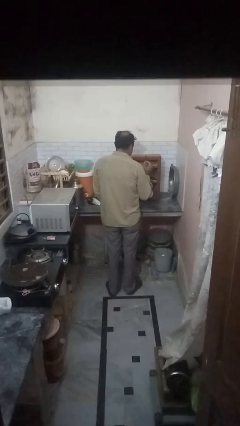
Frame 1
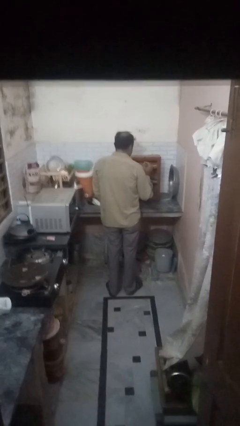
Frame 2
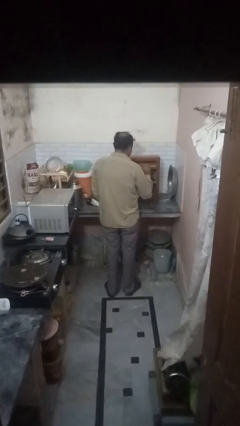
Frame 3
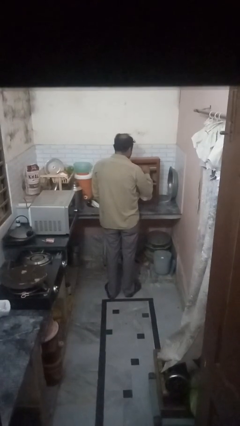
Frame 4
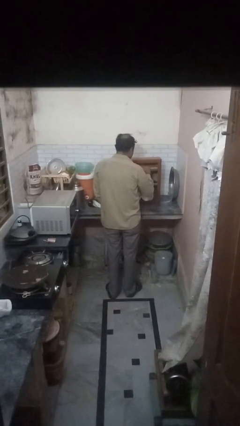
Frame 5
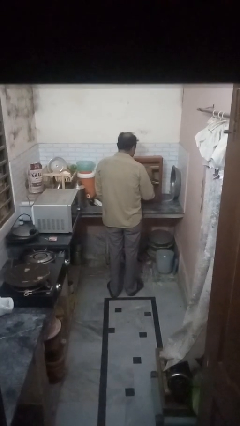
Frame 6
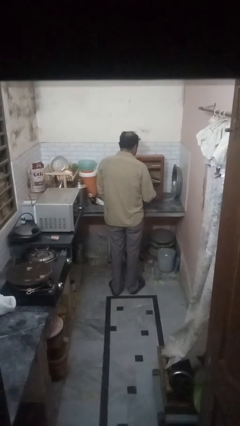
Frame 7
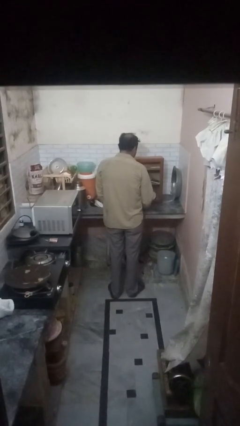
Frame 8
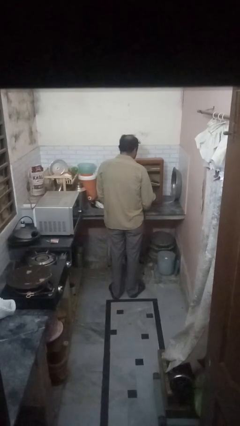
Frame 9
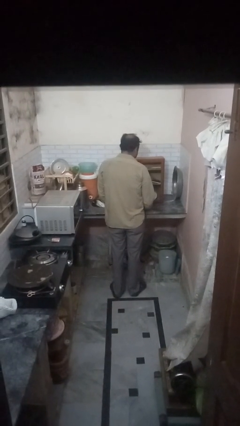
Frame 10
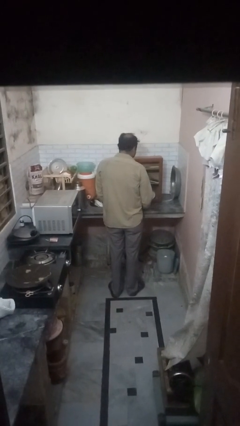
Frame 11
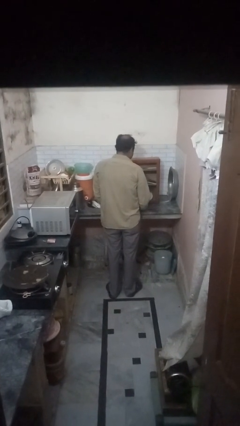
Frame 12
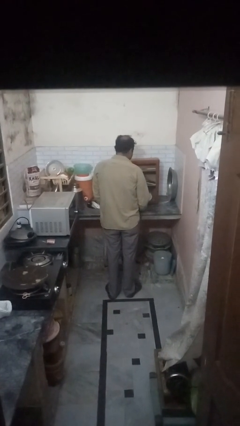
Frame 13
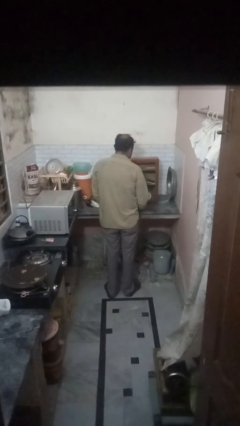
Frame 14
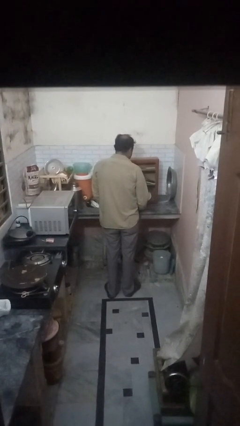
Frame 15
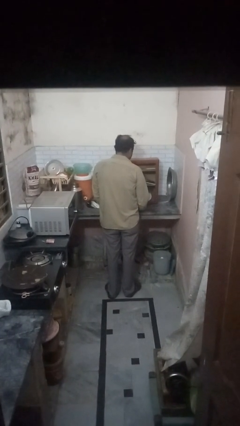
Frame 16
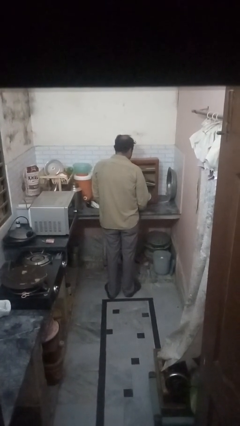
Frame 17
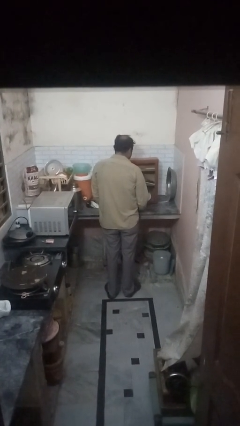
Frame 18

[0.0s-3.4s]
person takes object from cabinet

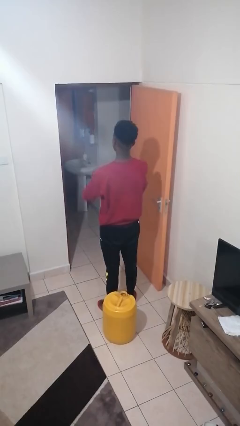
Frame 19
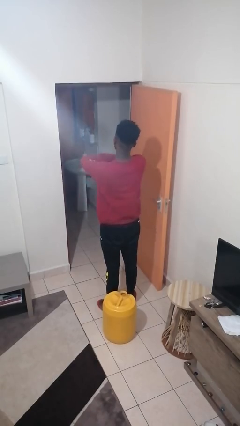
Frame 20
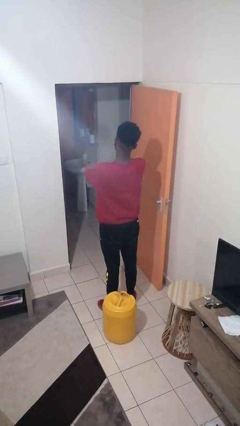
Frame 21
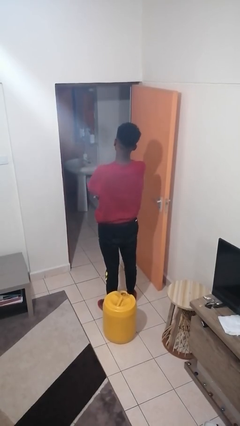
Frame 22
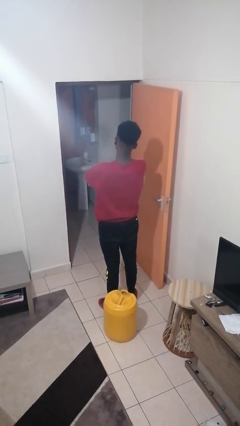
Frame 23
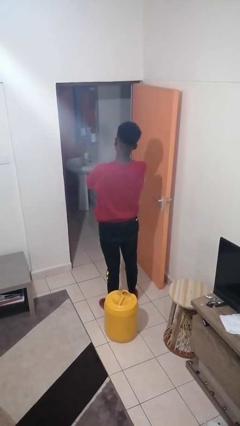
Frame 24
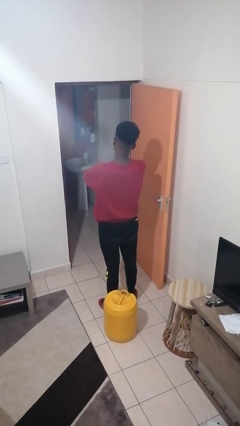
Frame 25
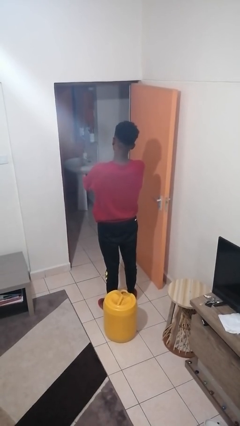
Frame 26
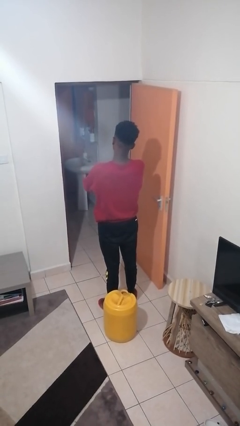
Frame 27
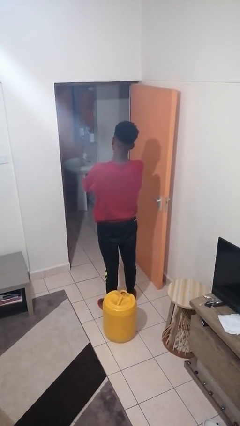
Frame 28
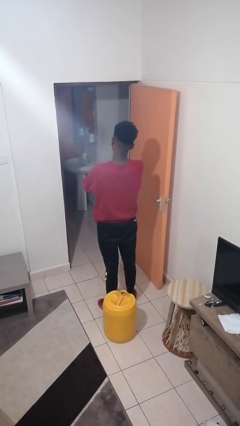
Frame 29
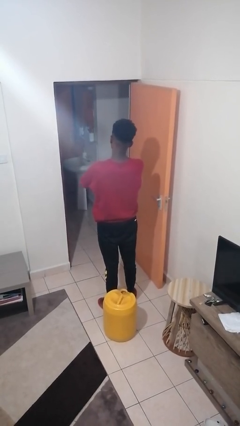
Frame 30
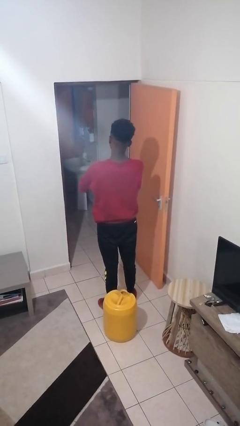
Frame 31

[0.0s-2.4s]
person crosses arms

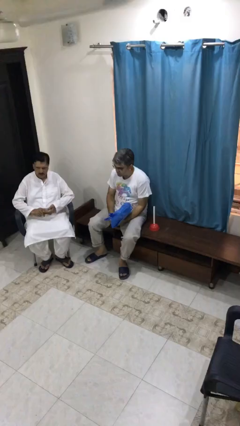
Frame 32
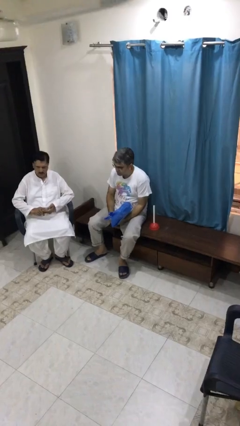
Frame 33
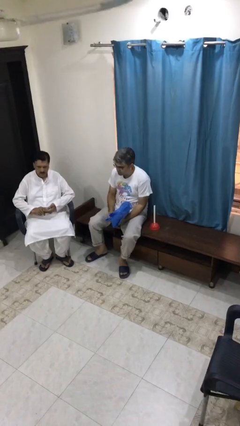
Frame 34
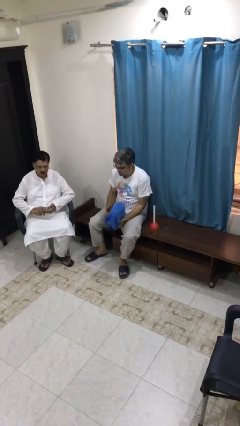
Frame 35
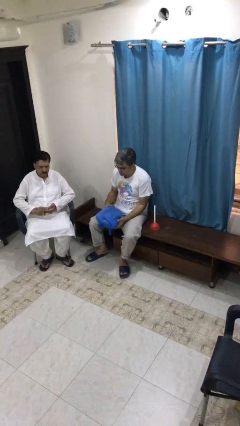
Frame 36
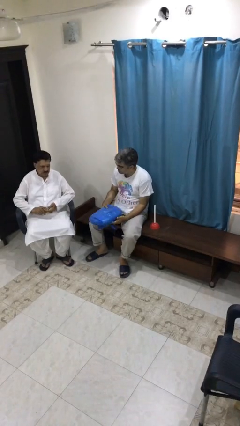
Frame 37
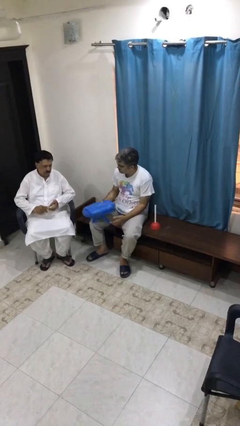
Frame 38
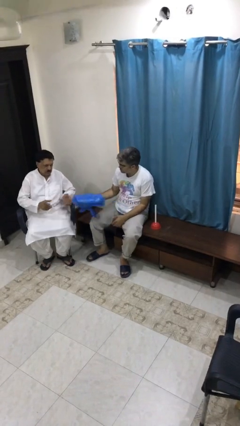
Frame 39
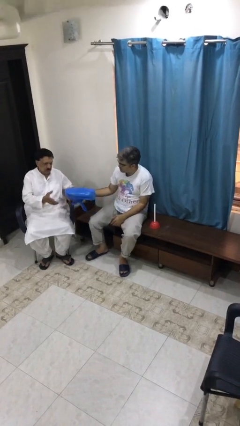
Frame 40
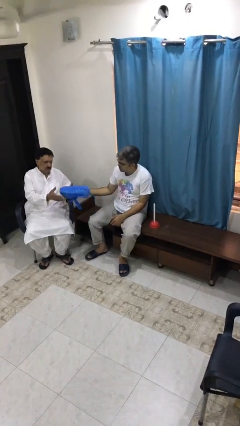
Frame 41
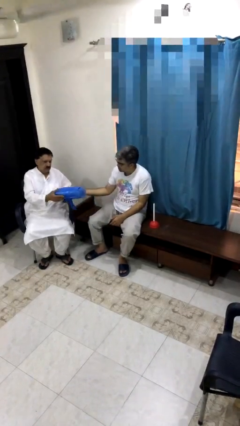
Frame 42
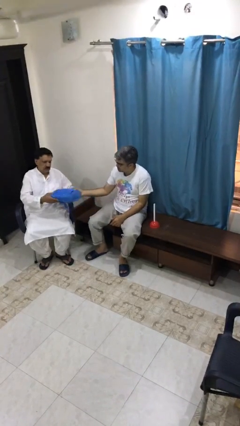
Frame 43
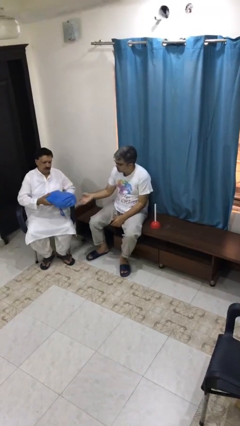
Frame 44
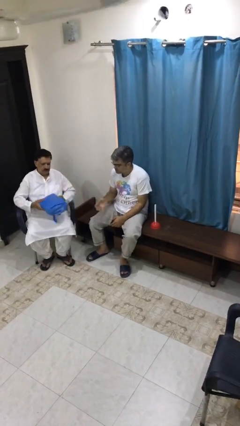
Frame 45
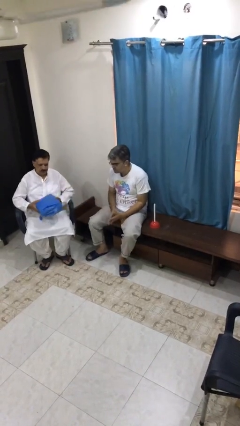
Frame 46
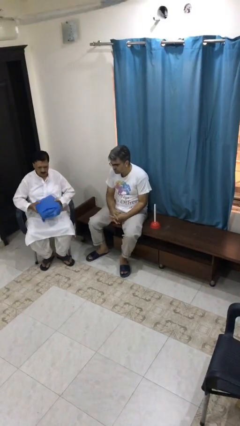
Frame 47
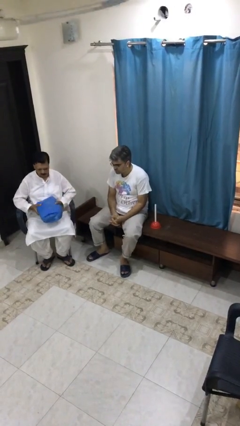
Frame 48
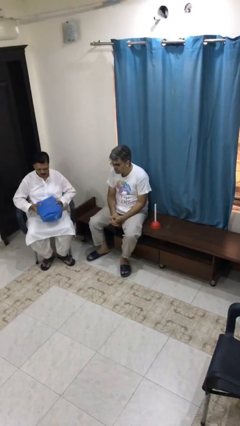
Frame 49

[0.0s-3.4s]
person transfers object to person

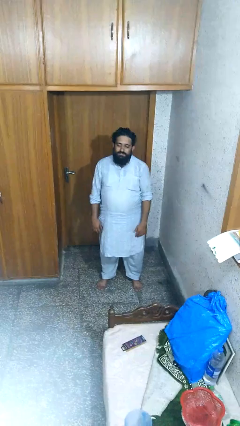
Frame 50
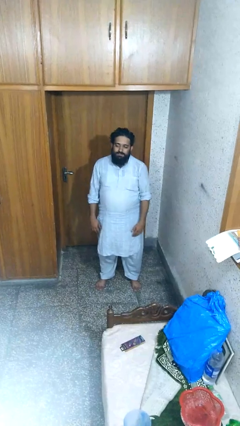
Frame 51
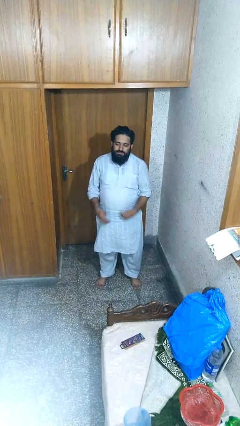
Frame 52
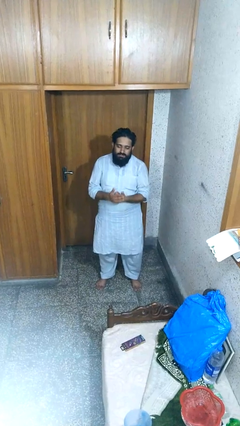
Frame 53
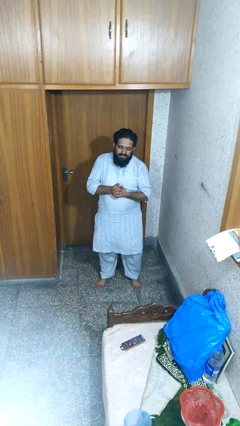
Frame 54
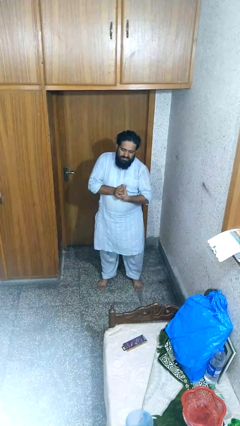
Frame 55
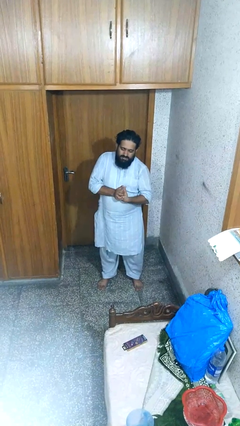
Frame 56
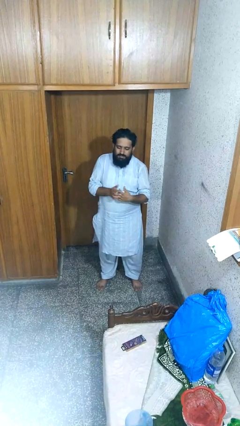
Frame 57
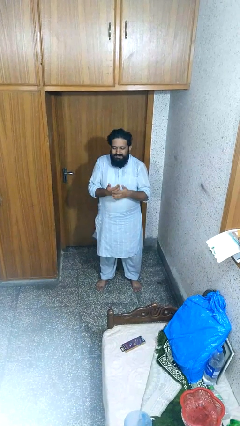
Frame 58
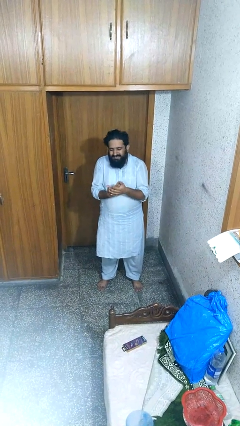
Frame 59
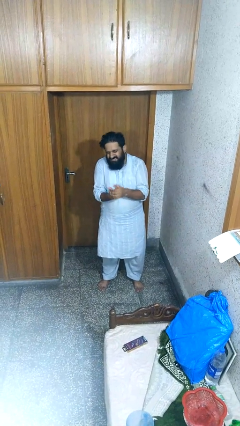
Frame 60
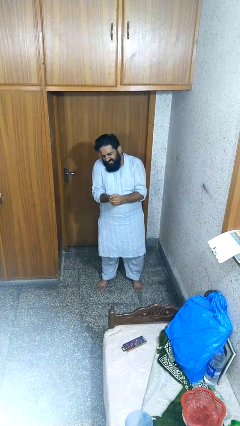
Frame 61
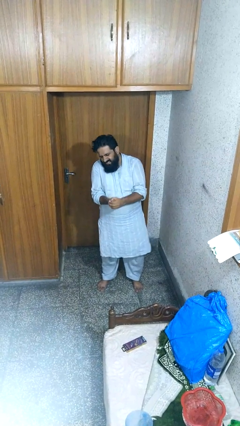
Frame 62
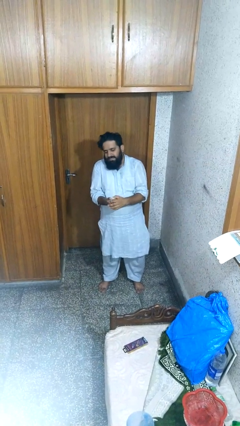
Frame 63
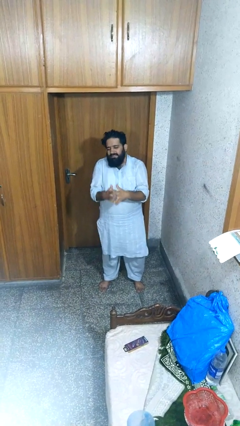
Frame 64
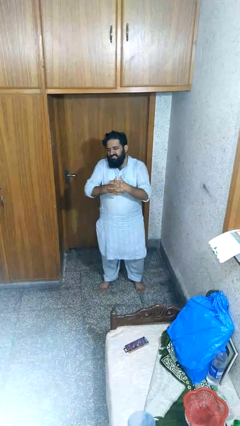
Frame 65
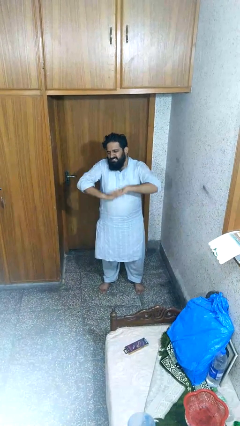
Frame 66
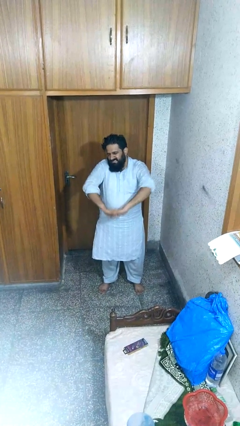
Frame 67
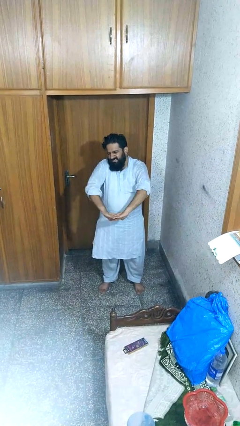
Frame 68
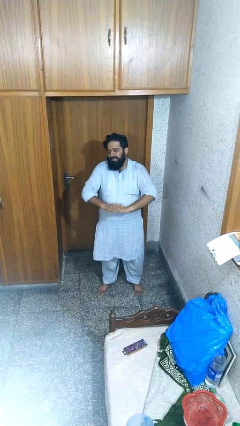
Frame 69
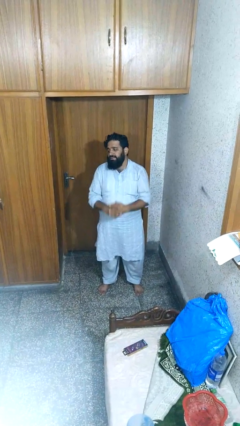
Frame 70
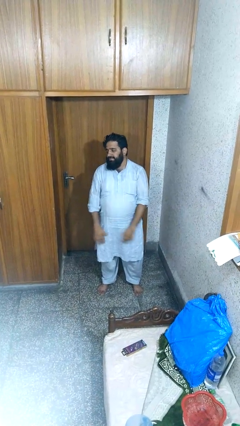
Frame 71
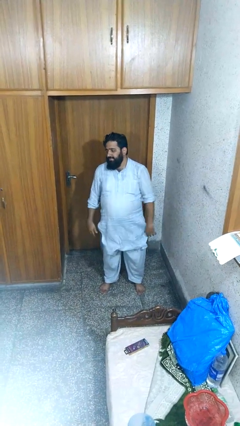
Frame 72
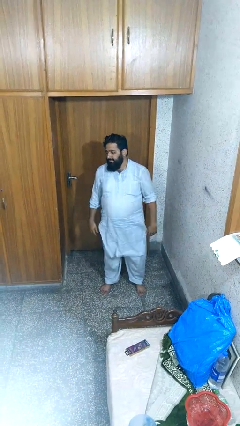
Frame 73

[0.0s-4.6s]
person cracks knuckles

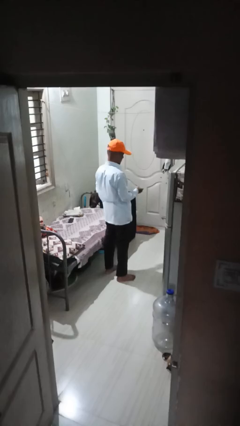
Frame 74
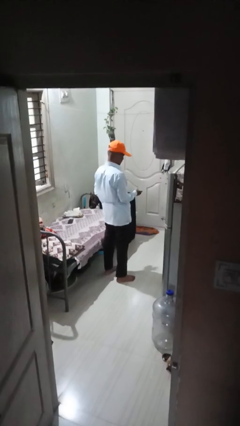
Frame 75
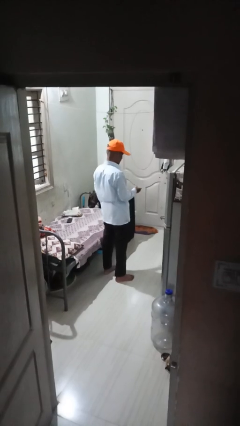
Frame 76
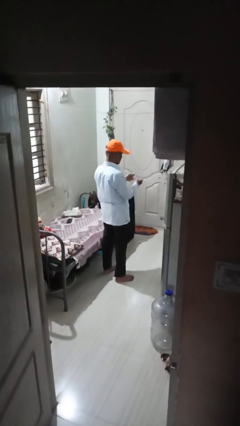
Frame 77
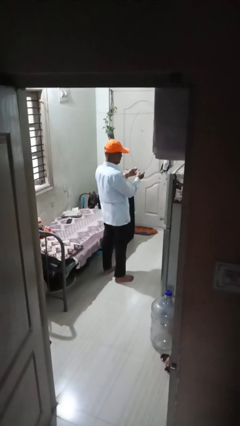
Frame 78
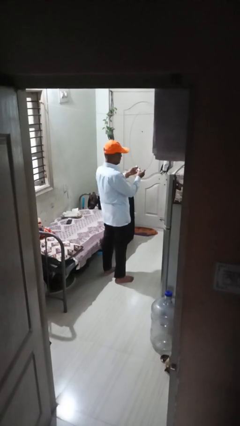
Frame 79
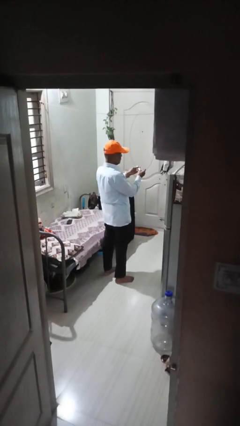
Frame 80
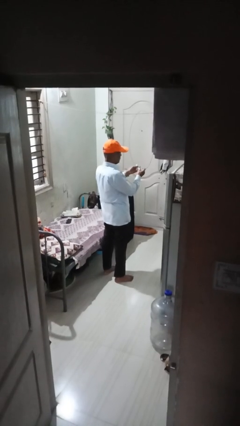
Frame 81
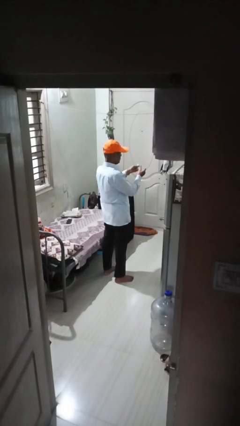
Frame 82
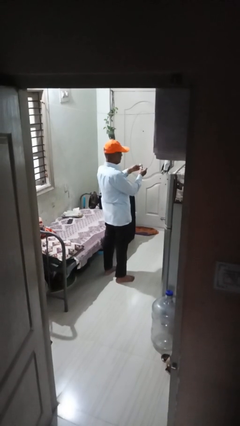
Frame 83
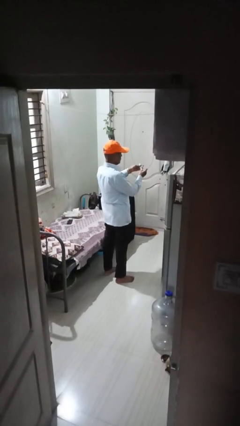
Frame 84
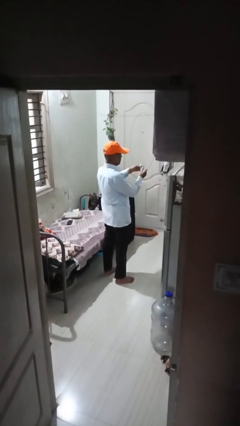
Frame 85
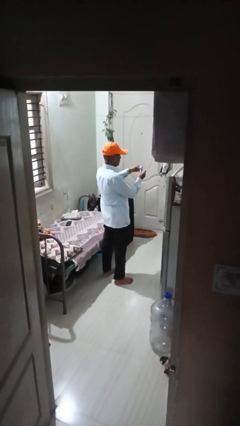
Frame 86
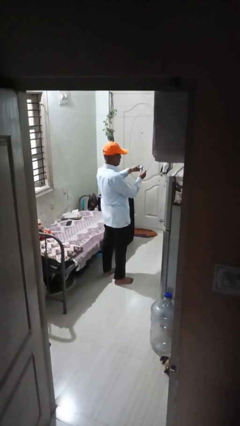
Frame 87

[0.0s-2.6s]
person clips fingernails

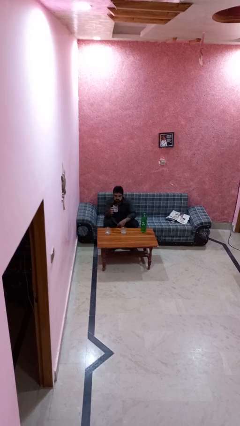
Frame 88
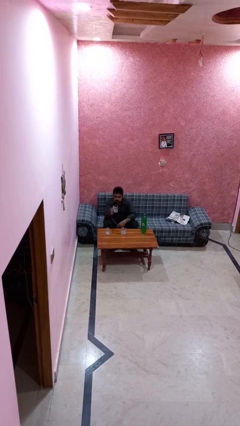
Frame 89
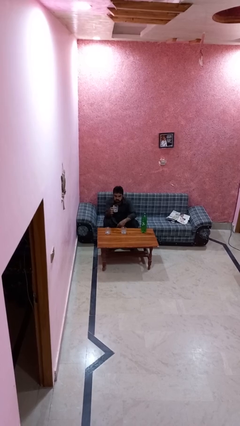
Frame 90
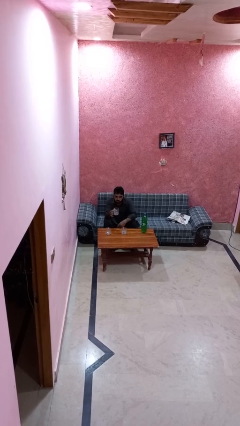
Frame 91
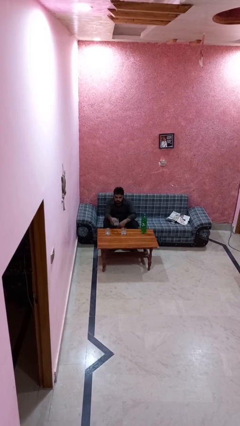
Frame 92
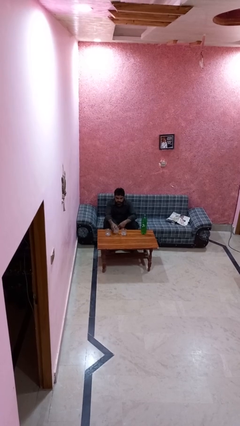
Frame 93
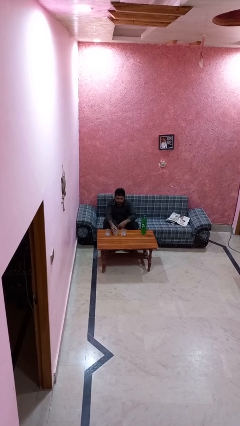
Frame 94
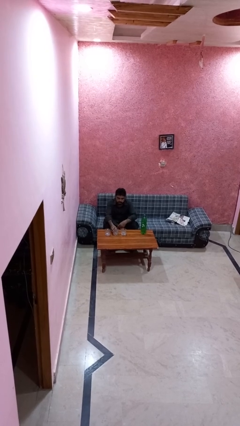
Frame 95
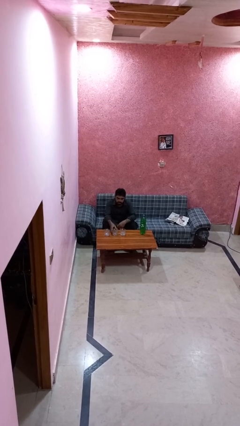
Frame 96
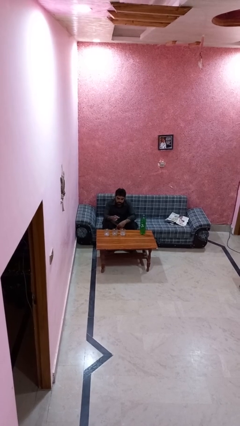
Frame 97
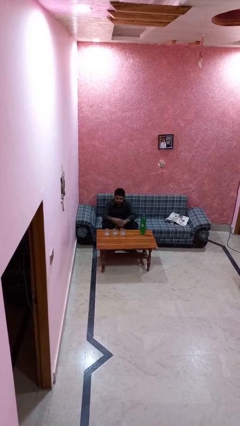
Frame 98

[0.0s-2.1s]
person puts down object on table
